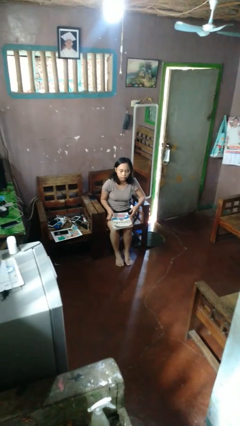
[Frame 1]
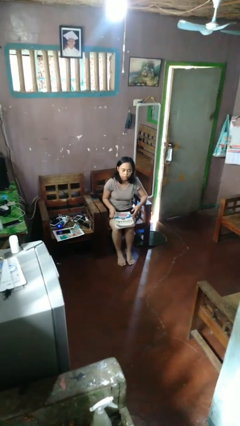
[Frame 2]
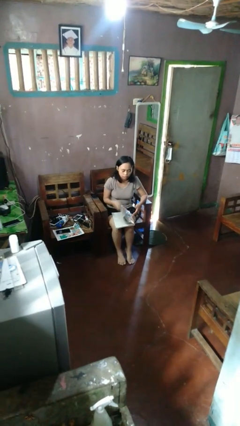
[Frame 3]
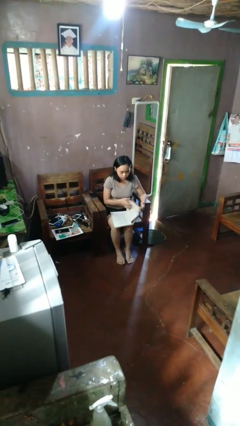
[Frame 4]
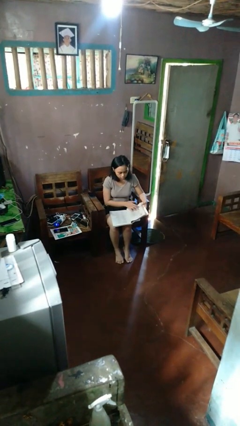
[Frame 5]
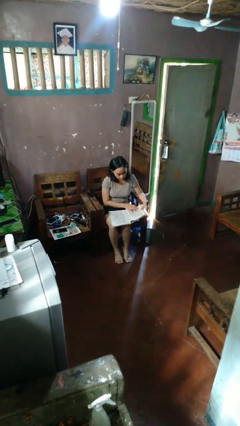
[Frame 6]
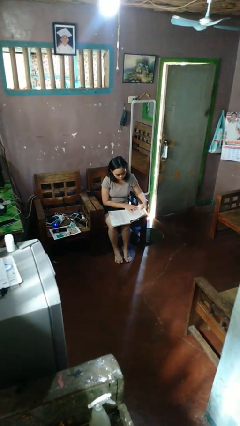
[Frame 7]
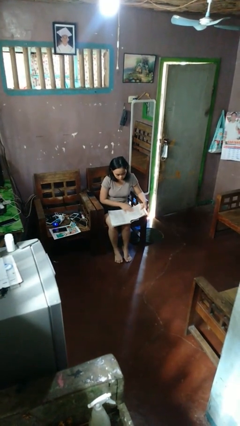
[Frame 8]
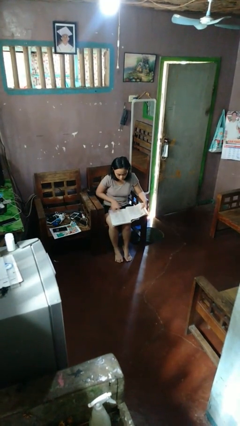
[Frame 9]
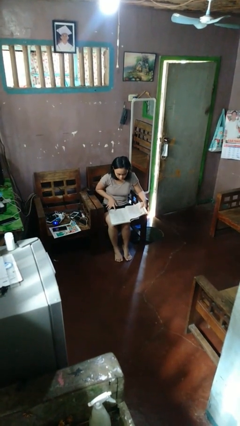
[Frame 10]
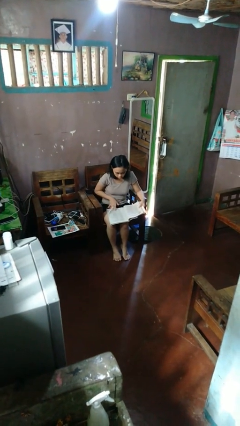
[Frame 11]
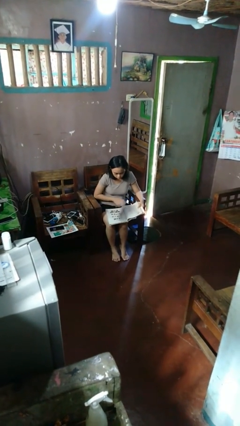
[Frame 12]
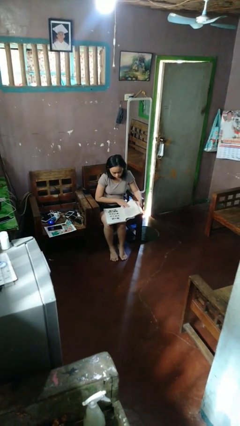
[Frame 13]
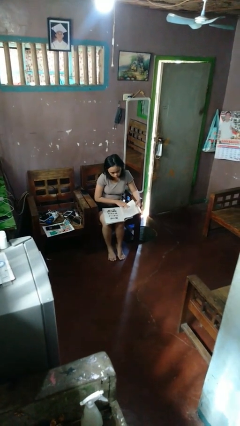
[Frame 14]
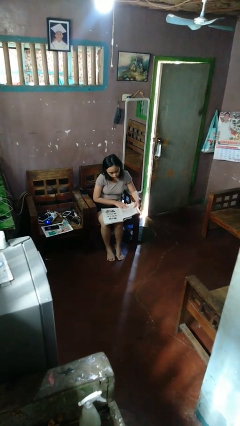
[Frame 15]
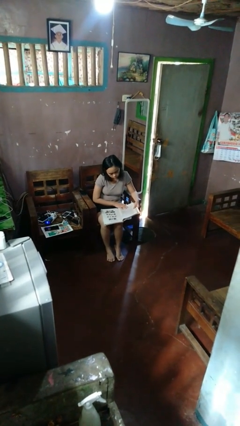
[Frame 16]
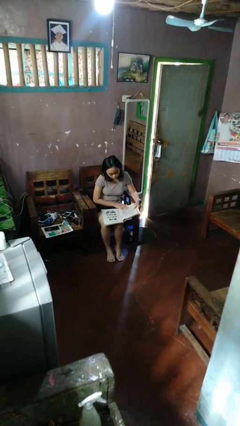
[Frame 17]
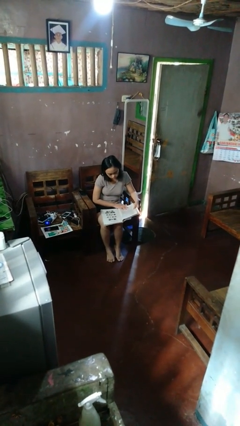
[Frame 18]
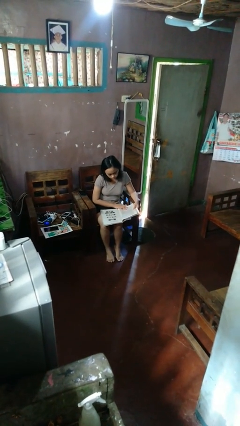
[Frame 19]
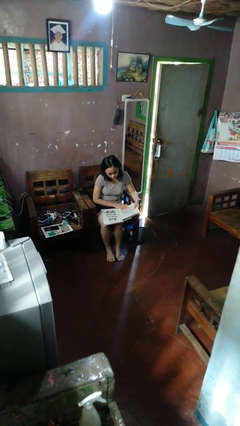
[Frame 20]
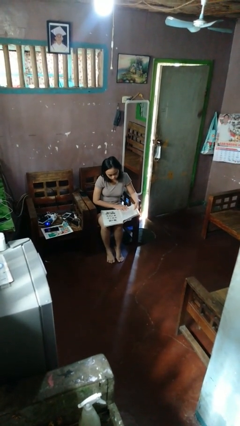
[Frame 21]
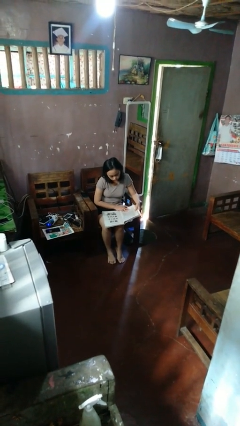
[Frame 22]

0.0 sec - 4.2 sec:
person reads book

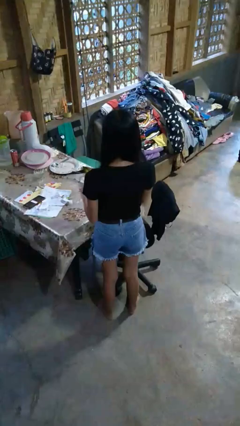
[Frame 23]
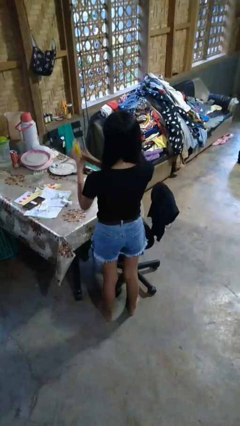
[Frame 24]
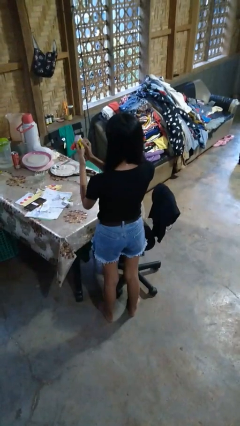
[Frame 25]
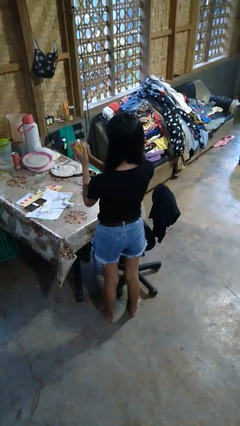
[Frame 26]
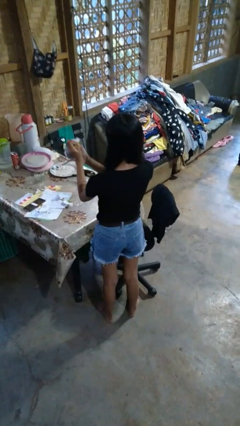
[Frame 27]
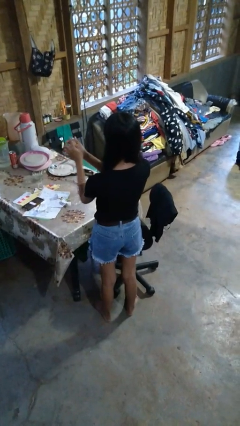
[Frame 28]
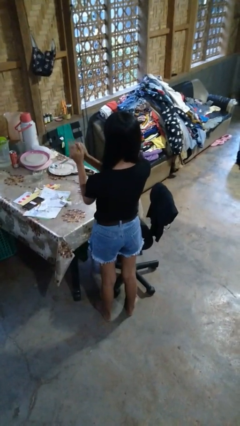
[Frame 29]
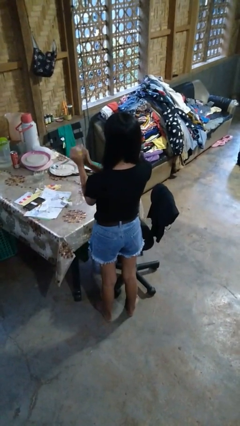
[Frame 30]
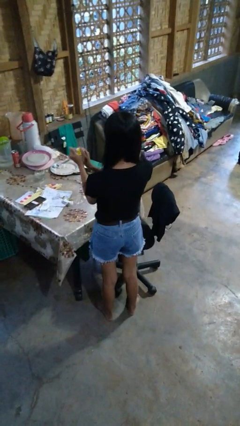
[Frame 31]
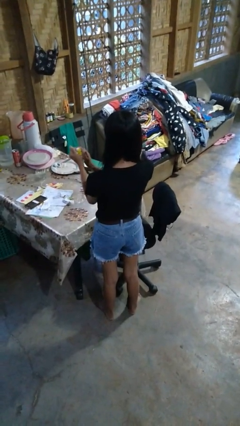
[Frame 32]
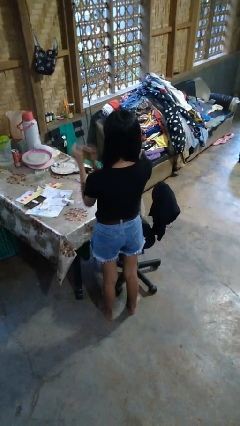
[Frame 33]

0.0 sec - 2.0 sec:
person crumples paper

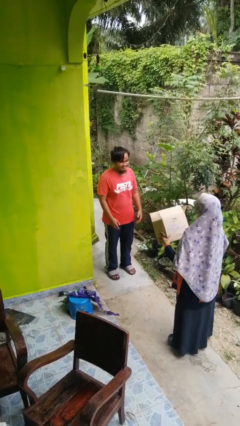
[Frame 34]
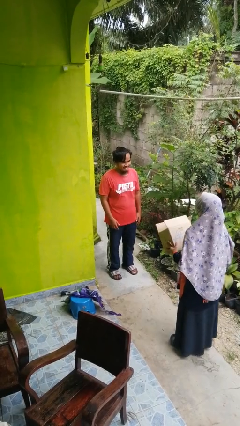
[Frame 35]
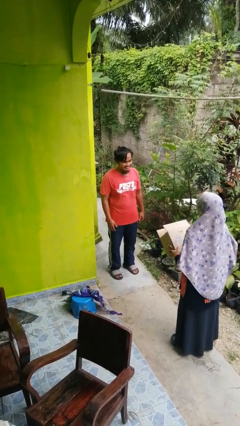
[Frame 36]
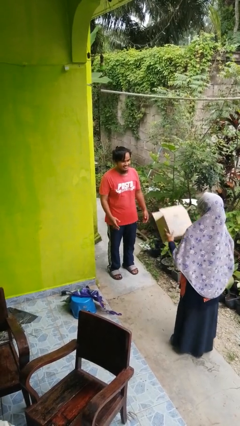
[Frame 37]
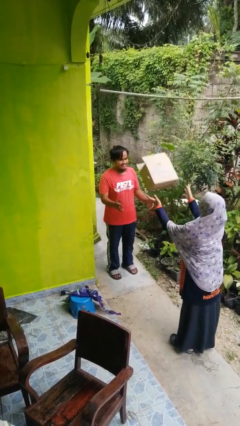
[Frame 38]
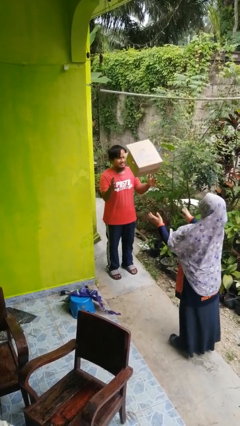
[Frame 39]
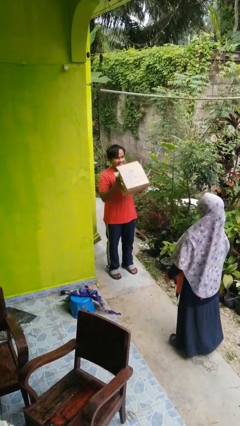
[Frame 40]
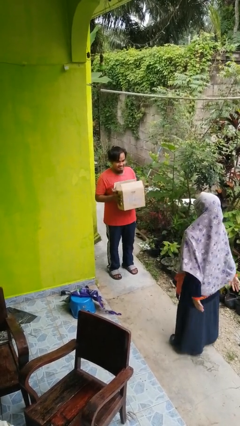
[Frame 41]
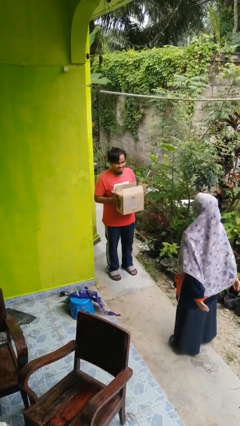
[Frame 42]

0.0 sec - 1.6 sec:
person catches object from person

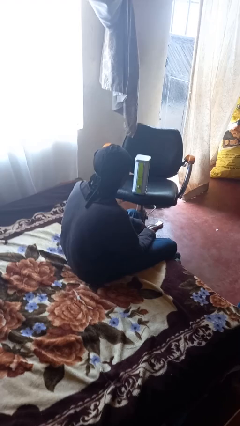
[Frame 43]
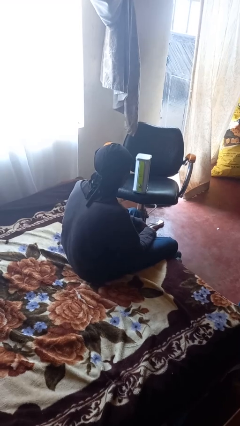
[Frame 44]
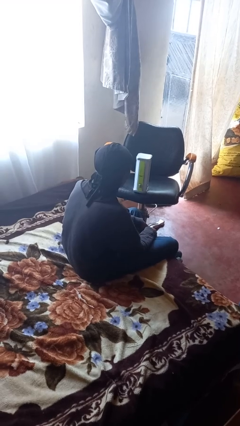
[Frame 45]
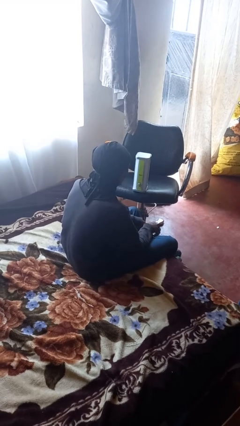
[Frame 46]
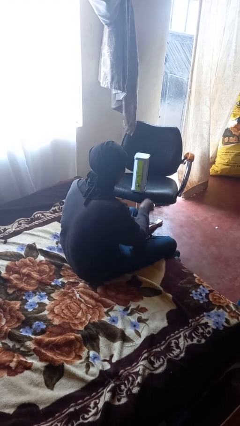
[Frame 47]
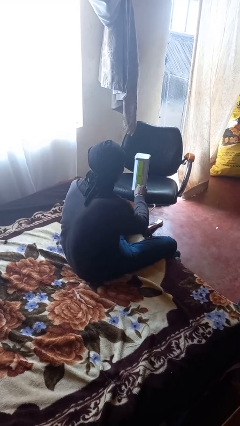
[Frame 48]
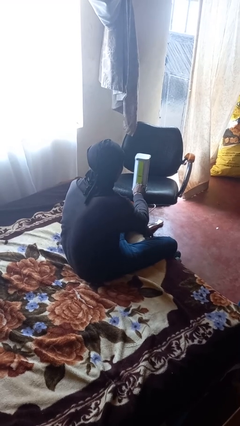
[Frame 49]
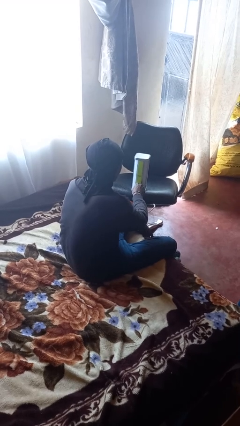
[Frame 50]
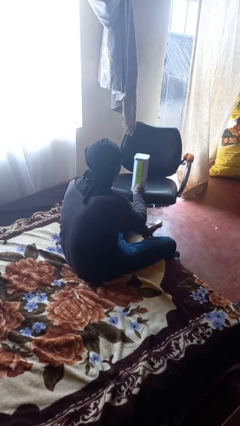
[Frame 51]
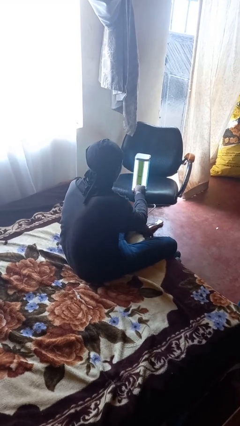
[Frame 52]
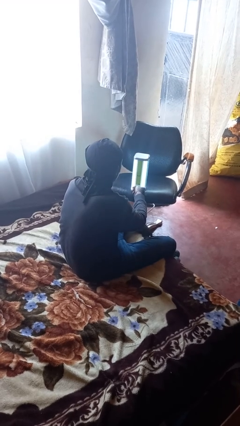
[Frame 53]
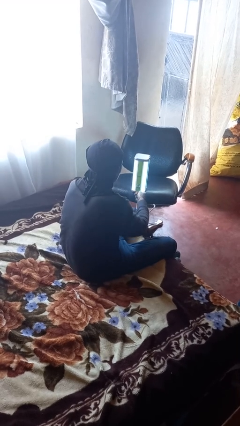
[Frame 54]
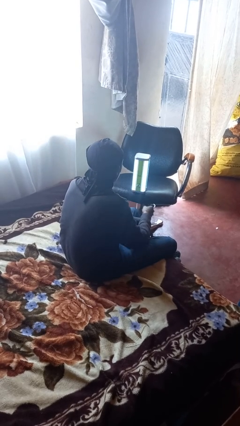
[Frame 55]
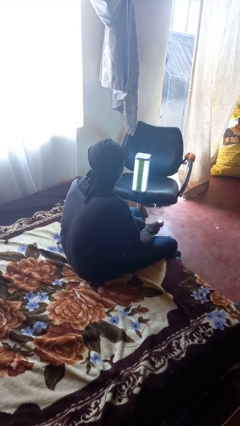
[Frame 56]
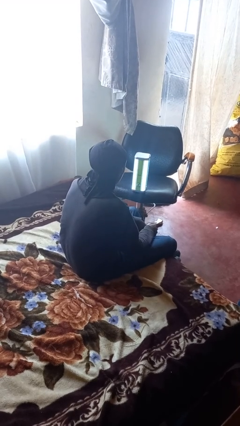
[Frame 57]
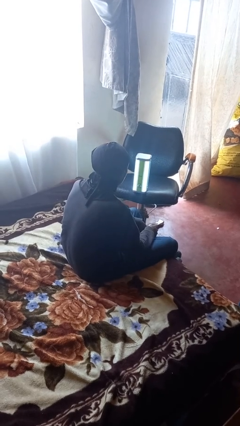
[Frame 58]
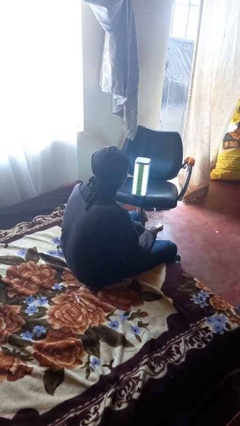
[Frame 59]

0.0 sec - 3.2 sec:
person turns on lamp

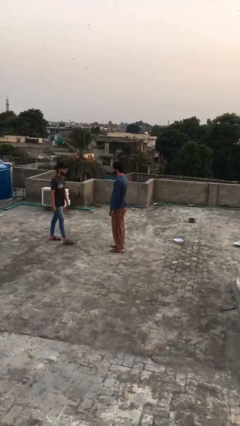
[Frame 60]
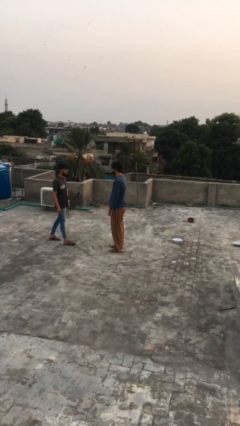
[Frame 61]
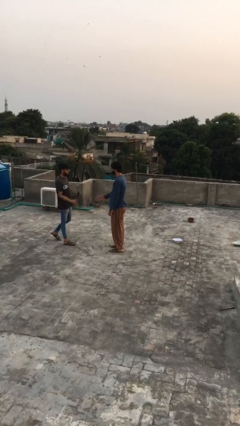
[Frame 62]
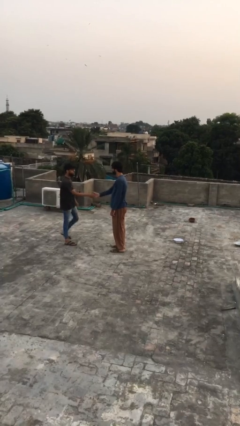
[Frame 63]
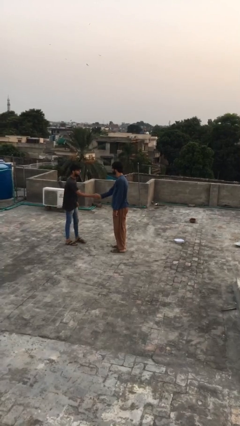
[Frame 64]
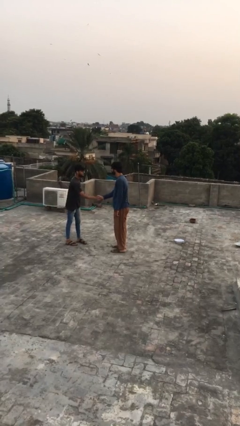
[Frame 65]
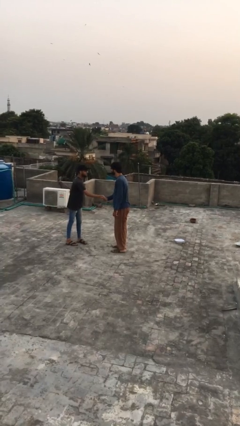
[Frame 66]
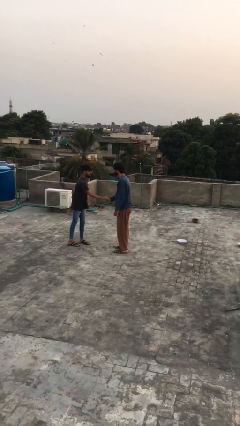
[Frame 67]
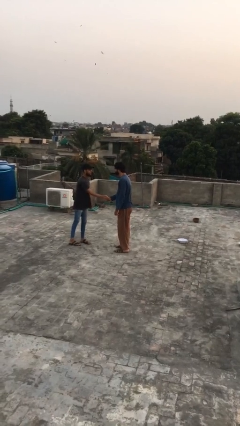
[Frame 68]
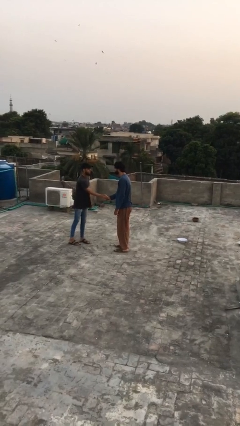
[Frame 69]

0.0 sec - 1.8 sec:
person shakes hand

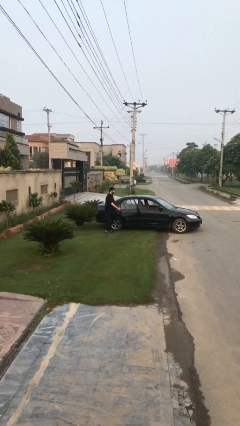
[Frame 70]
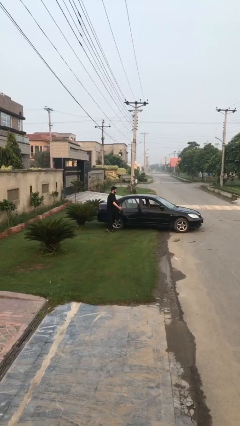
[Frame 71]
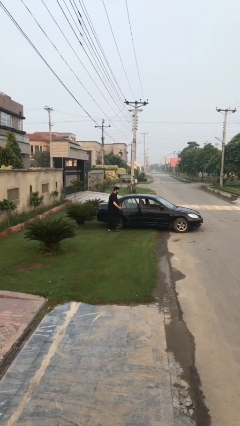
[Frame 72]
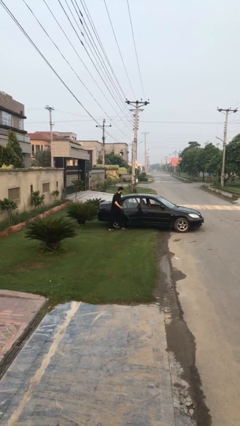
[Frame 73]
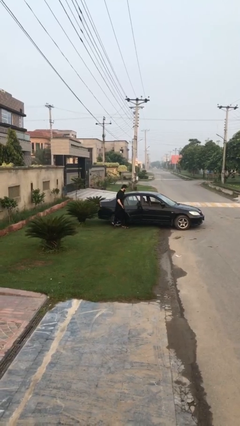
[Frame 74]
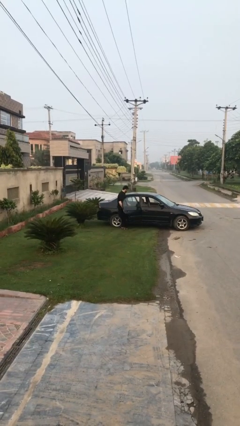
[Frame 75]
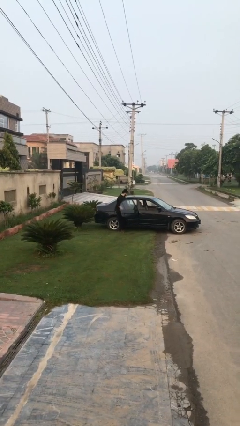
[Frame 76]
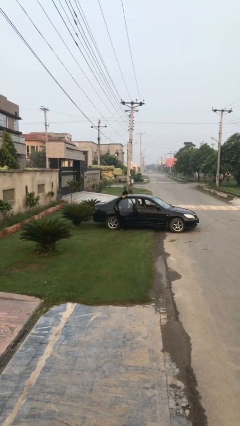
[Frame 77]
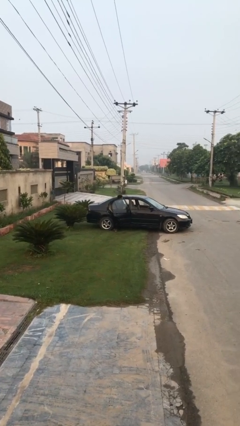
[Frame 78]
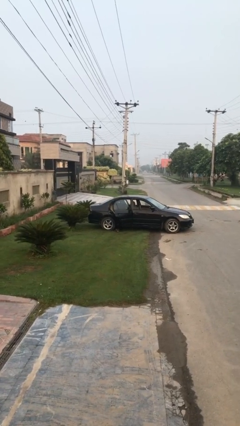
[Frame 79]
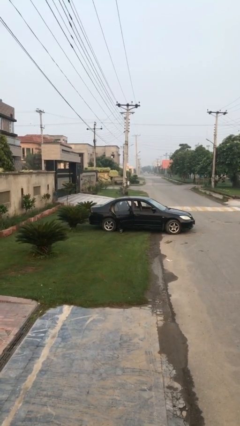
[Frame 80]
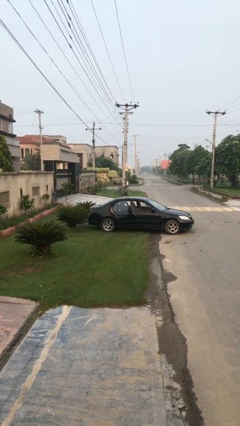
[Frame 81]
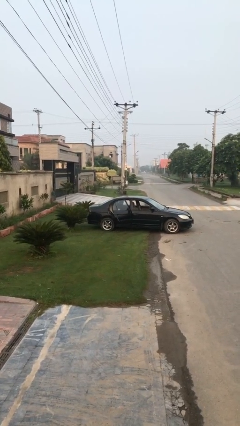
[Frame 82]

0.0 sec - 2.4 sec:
person enters car

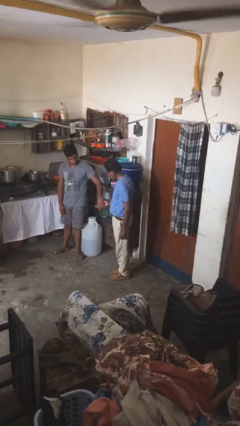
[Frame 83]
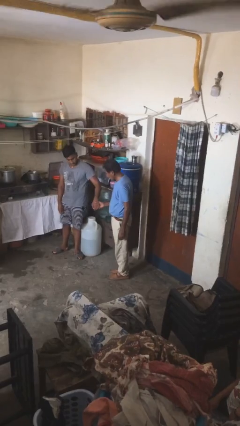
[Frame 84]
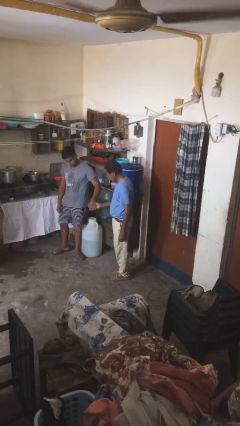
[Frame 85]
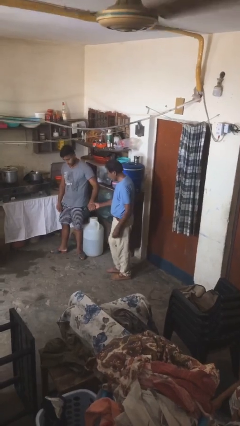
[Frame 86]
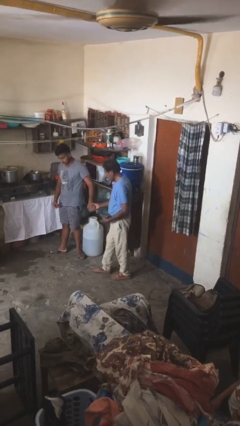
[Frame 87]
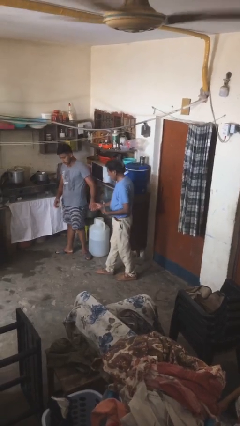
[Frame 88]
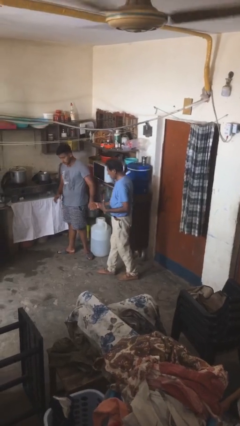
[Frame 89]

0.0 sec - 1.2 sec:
person holds hand

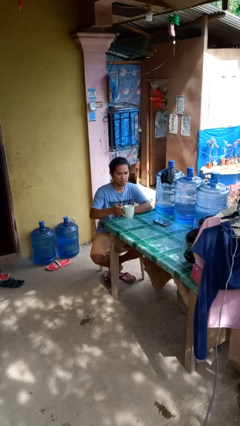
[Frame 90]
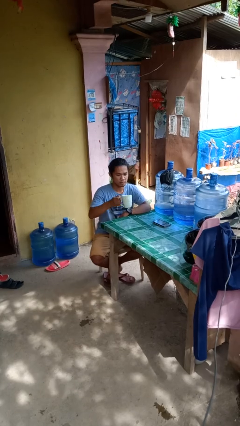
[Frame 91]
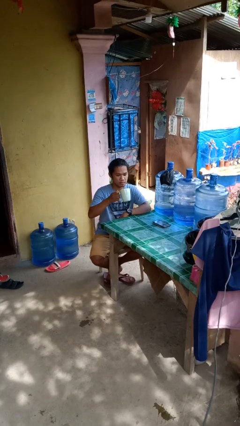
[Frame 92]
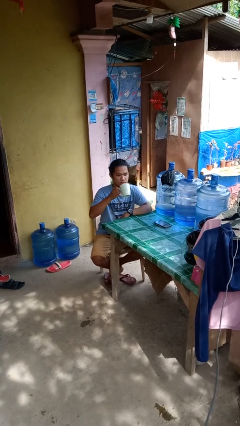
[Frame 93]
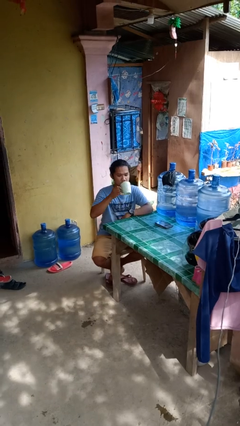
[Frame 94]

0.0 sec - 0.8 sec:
person picks up object from table
